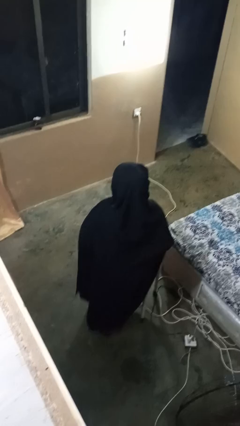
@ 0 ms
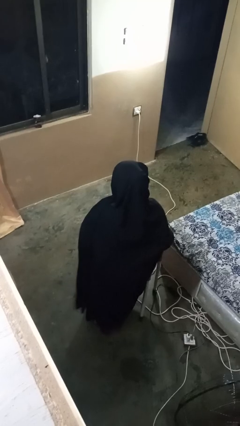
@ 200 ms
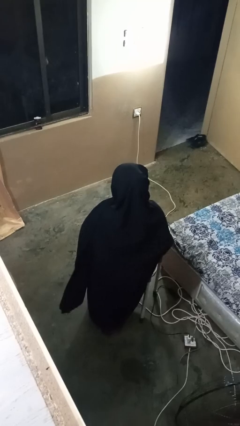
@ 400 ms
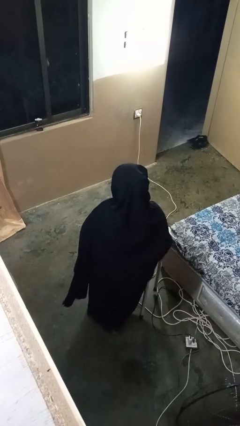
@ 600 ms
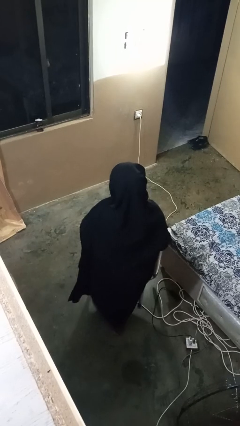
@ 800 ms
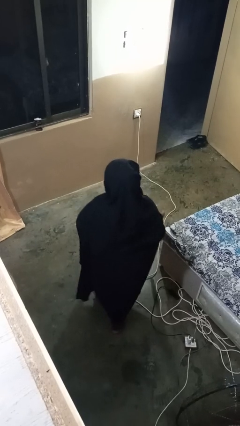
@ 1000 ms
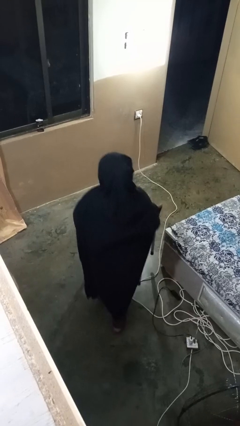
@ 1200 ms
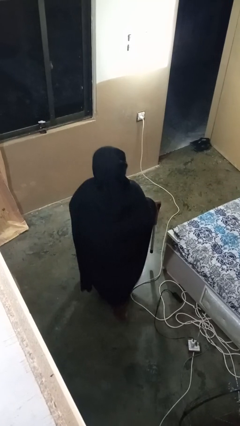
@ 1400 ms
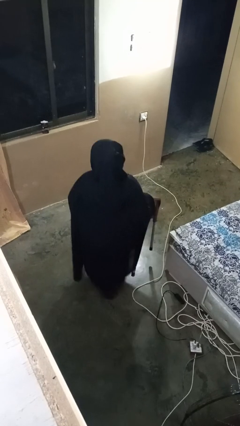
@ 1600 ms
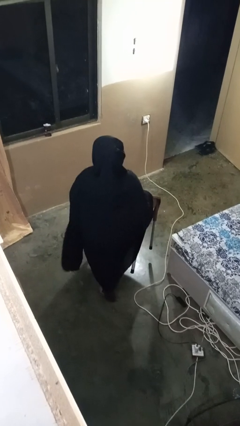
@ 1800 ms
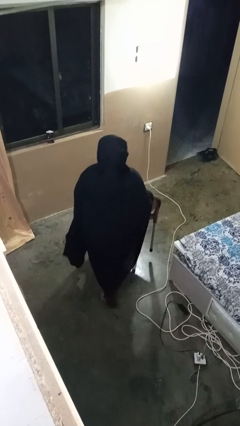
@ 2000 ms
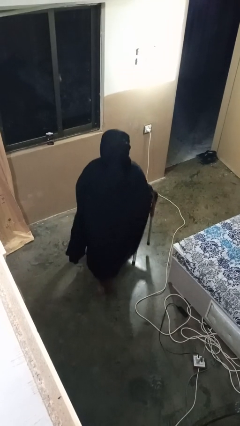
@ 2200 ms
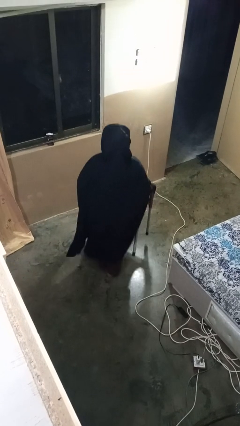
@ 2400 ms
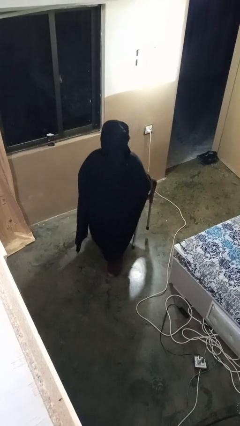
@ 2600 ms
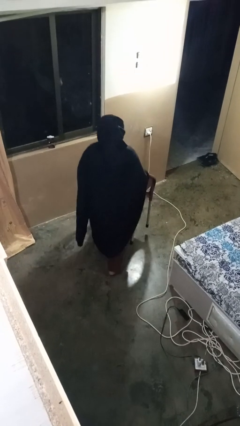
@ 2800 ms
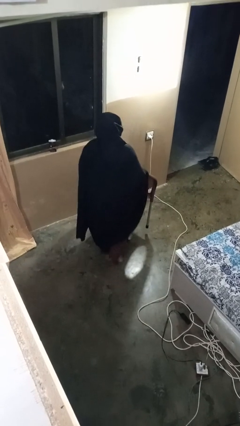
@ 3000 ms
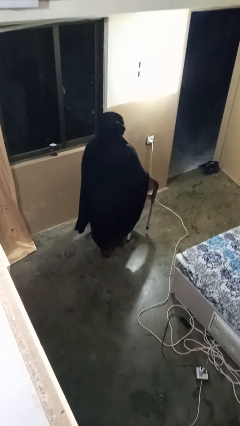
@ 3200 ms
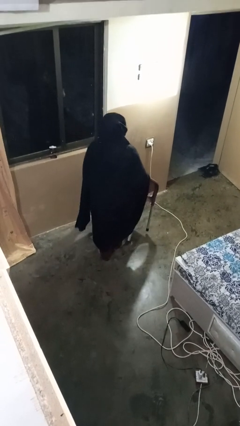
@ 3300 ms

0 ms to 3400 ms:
person carries furniture

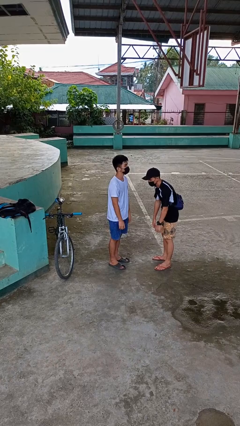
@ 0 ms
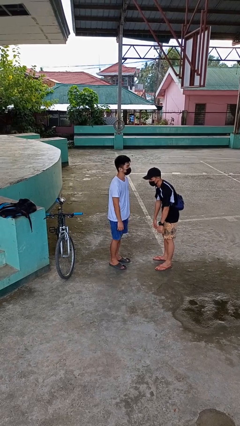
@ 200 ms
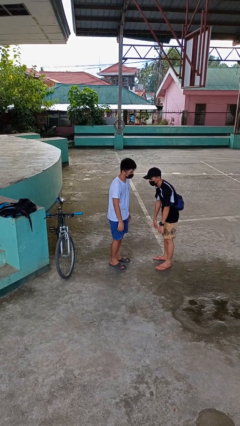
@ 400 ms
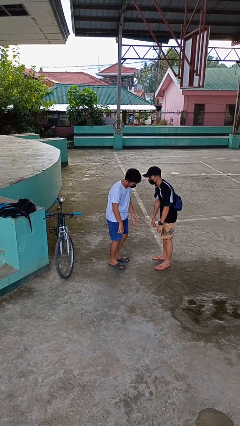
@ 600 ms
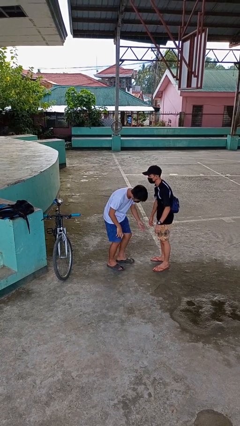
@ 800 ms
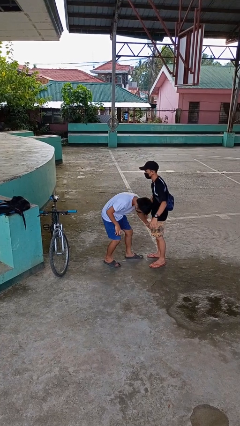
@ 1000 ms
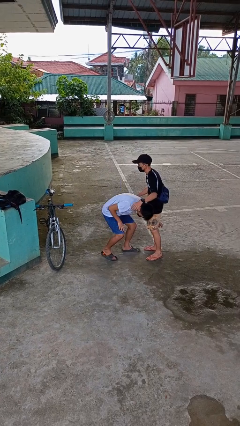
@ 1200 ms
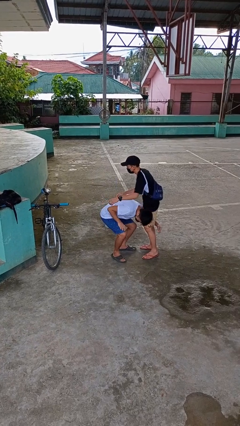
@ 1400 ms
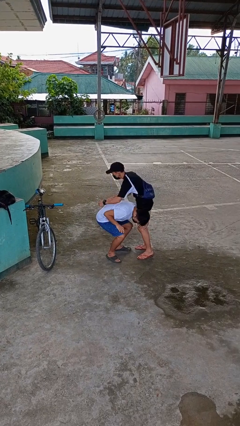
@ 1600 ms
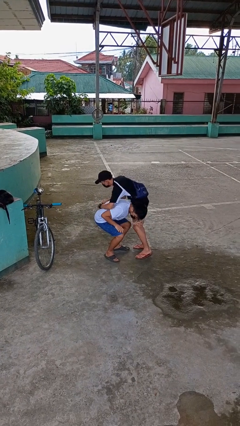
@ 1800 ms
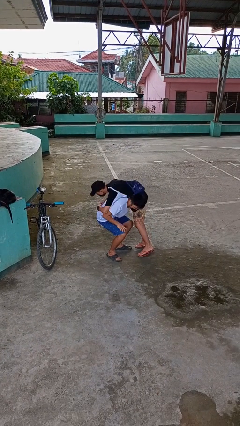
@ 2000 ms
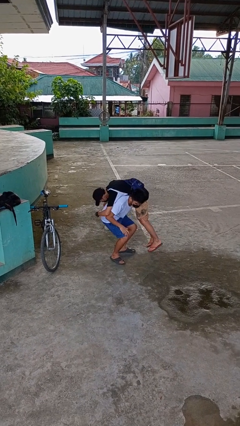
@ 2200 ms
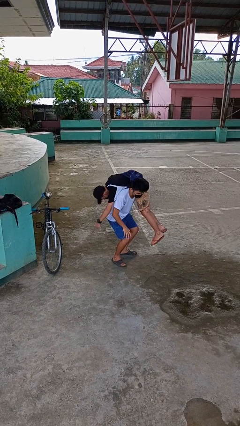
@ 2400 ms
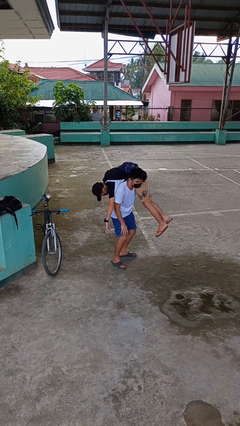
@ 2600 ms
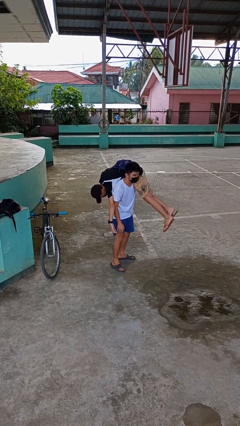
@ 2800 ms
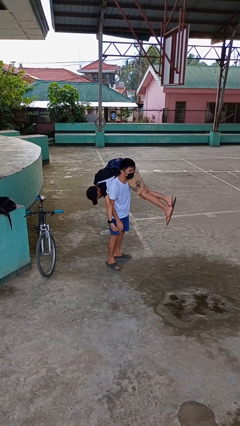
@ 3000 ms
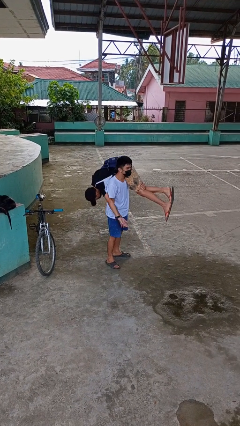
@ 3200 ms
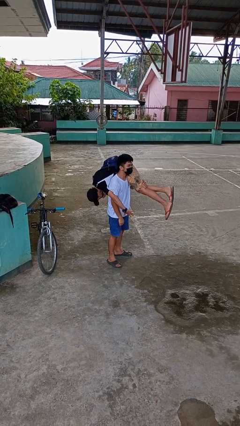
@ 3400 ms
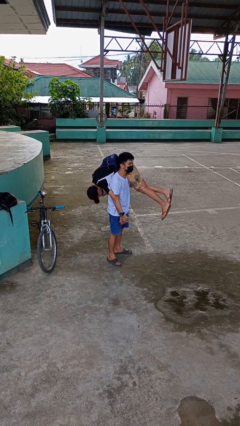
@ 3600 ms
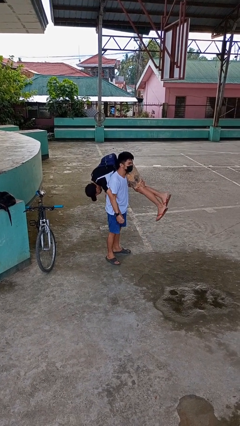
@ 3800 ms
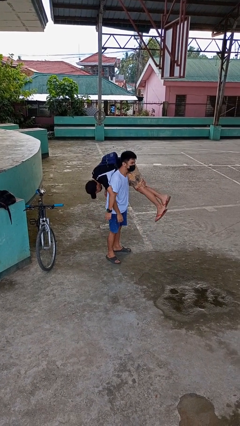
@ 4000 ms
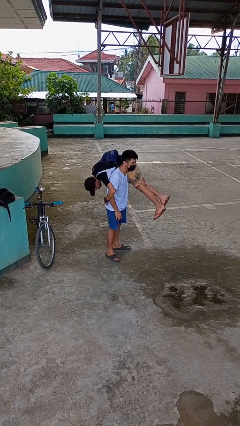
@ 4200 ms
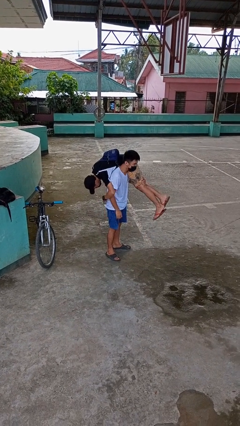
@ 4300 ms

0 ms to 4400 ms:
person carries person over shoulder

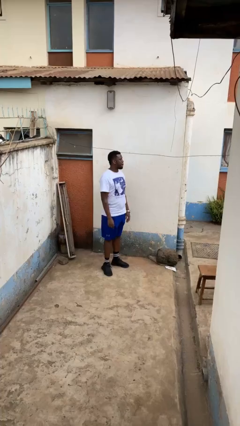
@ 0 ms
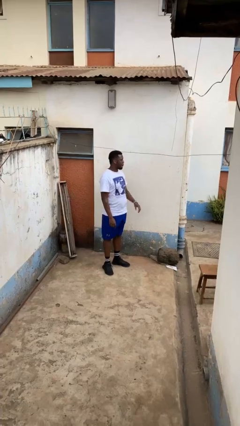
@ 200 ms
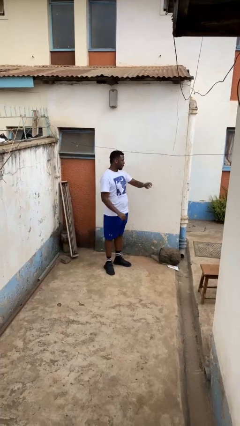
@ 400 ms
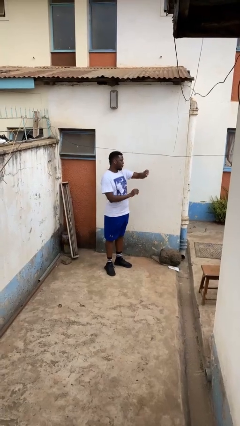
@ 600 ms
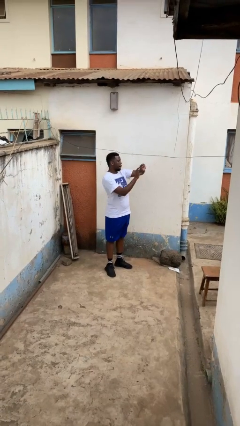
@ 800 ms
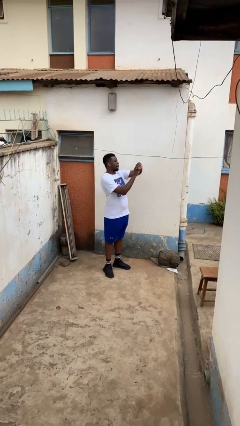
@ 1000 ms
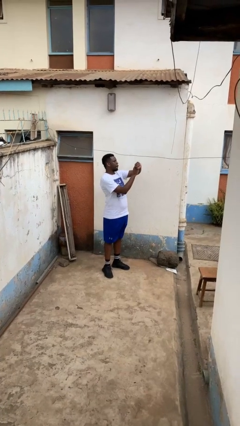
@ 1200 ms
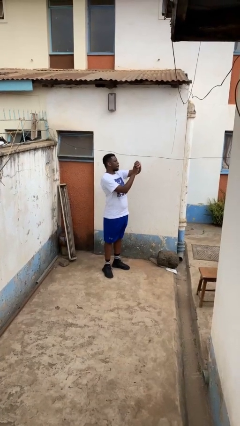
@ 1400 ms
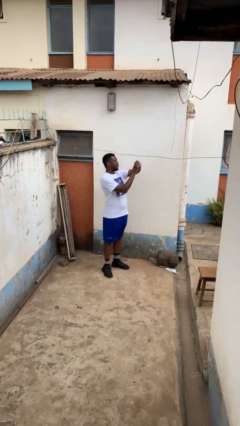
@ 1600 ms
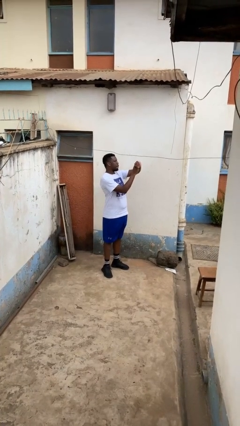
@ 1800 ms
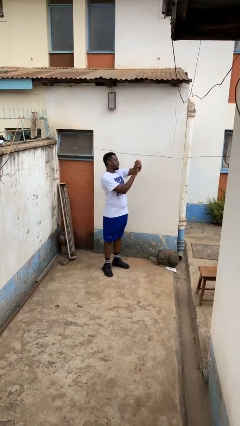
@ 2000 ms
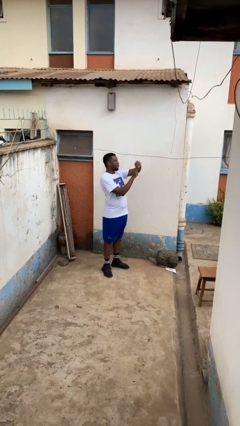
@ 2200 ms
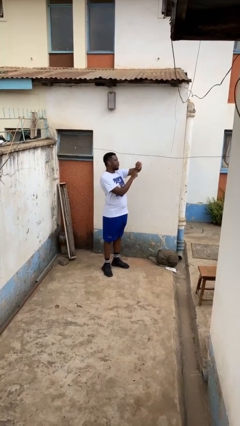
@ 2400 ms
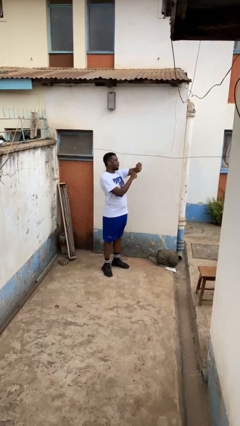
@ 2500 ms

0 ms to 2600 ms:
person looks at wristwatch

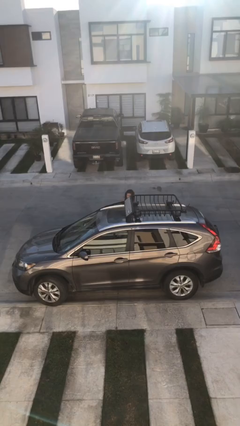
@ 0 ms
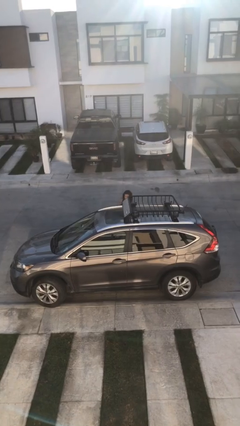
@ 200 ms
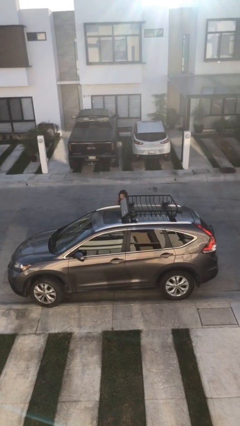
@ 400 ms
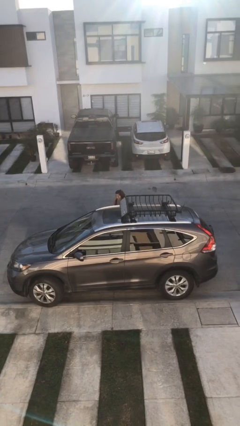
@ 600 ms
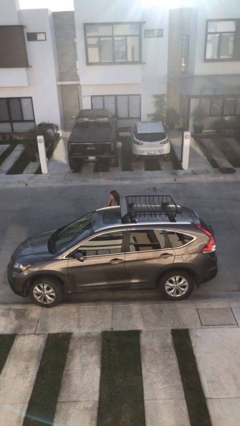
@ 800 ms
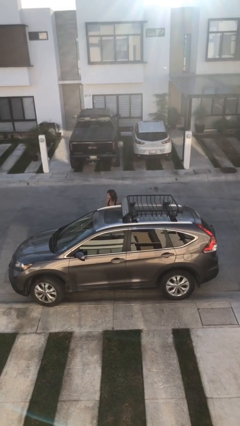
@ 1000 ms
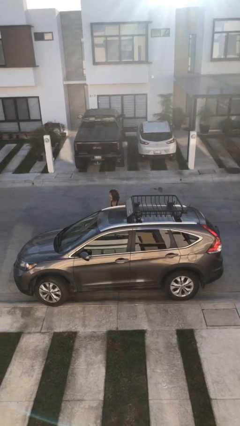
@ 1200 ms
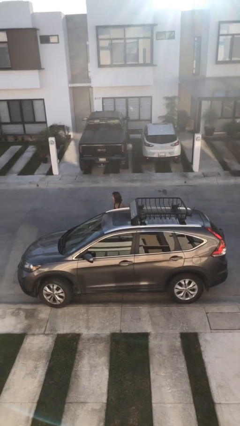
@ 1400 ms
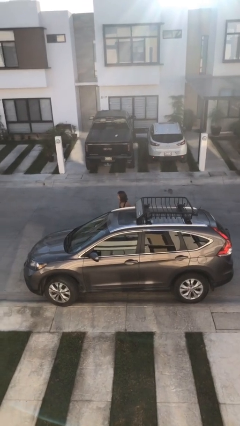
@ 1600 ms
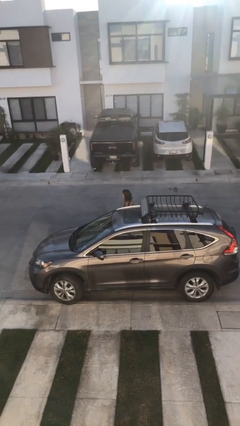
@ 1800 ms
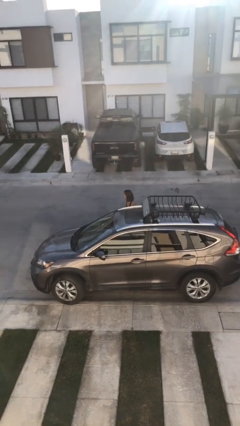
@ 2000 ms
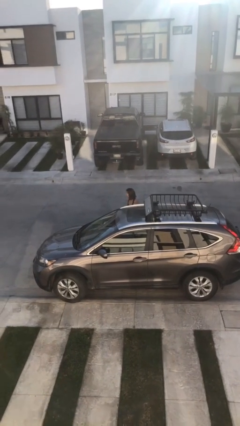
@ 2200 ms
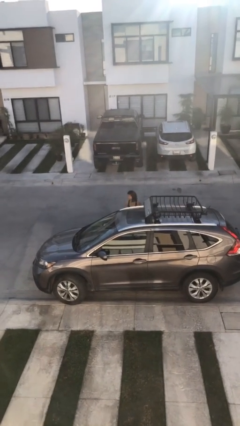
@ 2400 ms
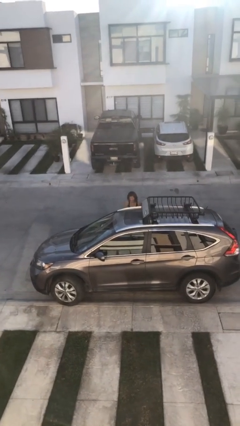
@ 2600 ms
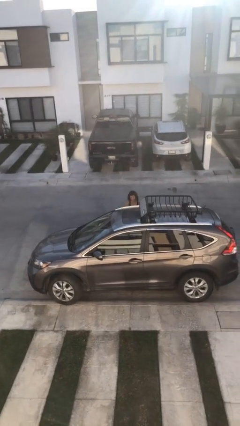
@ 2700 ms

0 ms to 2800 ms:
person closes car door

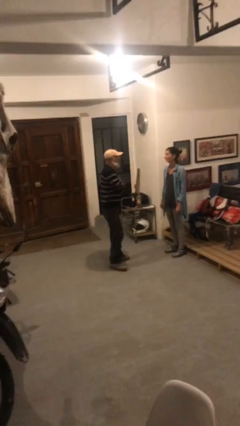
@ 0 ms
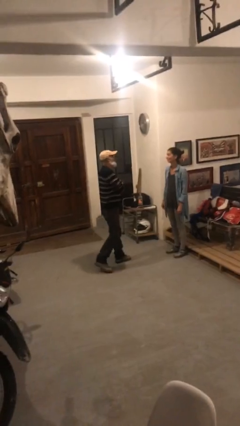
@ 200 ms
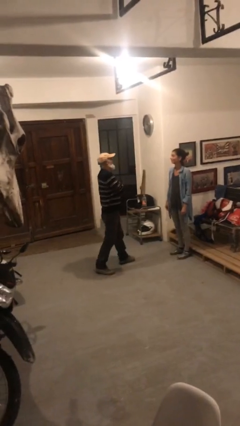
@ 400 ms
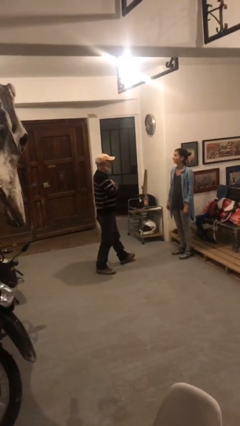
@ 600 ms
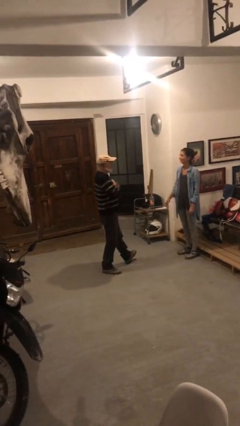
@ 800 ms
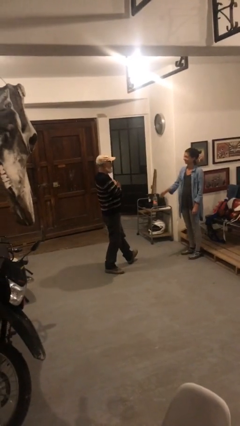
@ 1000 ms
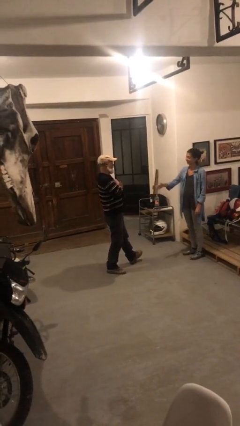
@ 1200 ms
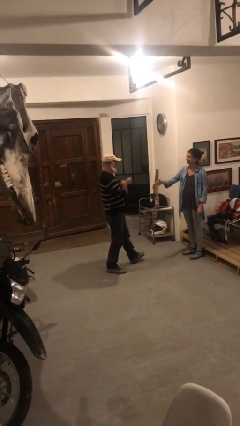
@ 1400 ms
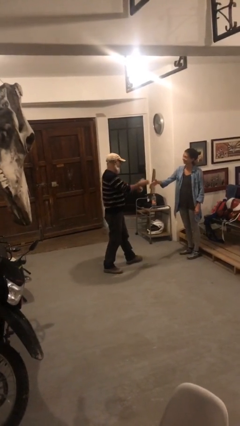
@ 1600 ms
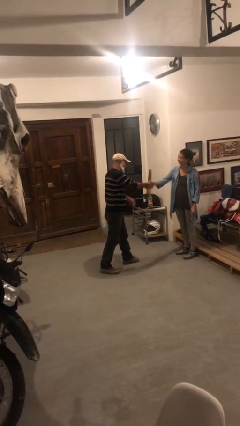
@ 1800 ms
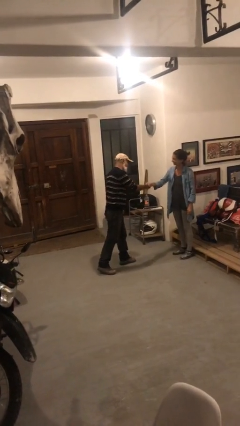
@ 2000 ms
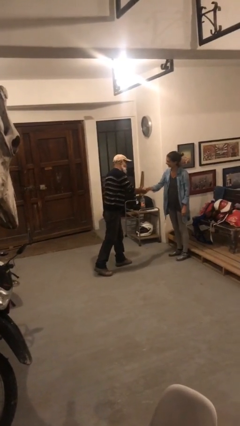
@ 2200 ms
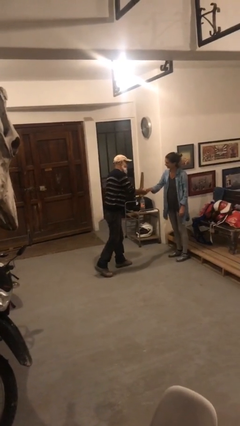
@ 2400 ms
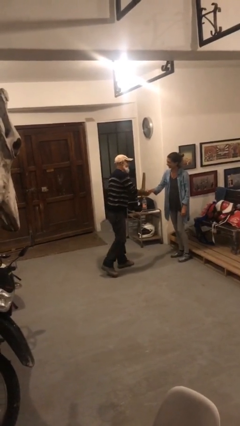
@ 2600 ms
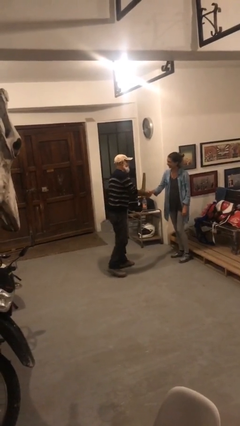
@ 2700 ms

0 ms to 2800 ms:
person shakes hand

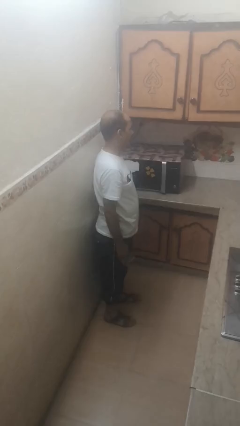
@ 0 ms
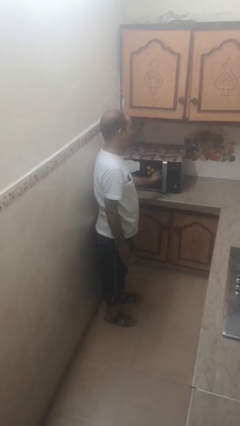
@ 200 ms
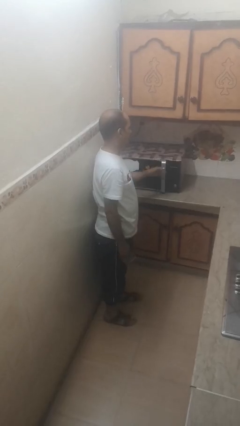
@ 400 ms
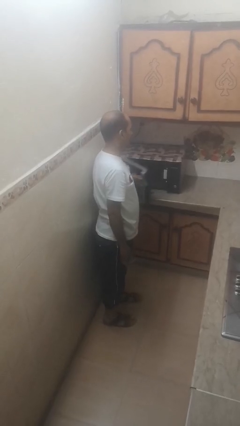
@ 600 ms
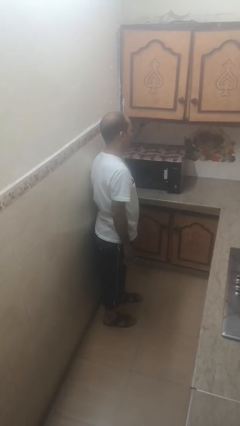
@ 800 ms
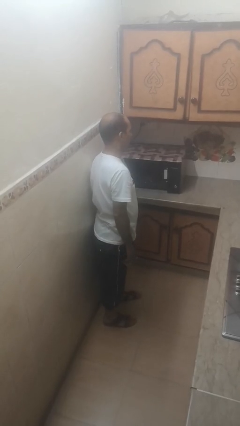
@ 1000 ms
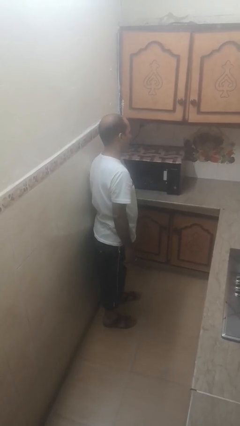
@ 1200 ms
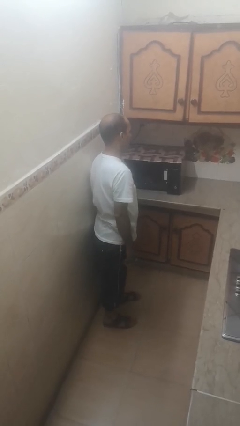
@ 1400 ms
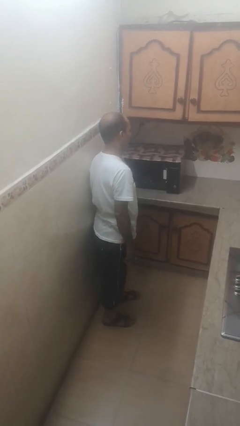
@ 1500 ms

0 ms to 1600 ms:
person opens microwave
